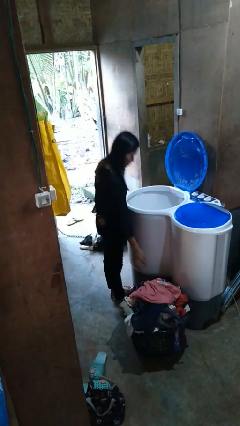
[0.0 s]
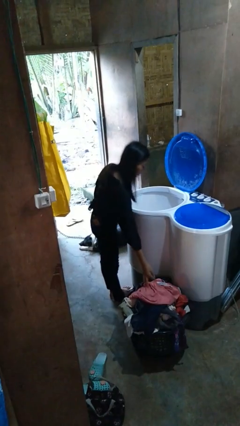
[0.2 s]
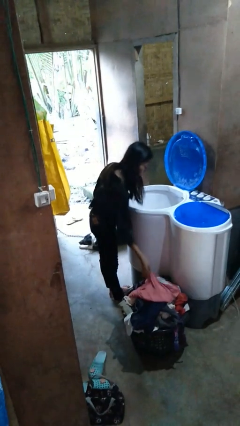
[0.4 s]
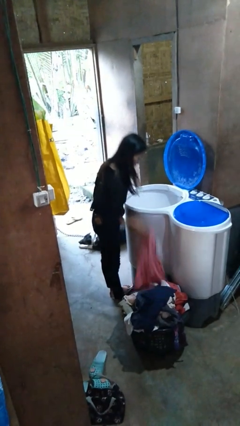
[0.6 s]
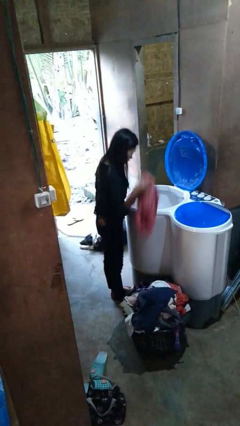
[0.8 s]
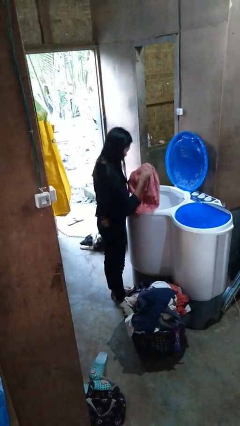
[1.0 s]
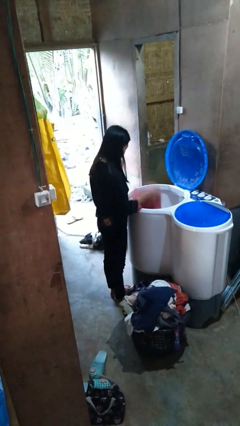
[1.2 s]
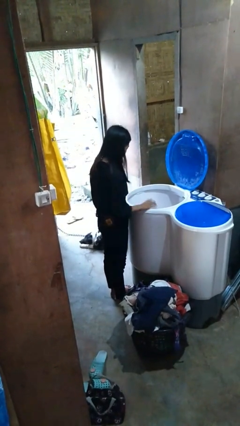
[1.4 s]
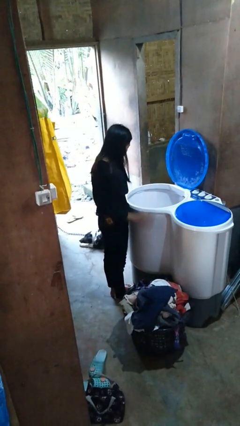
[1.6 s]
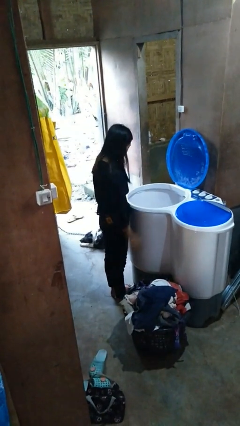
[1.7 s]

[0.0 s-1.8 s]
person loads clotheswasher

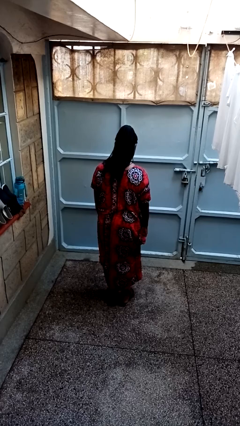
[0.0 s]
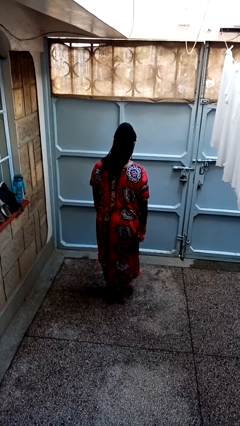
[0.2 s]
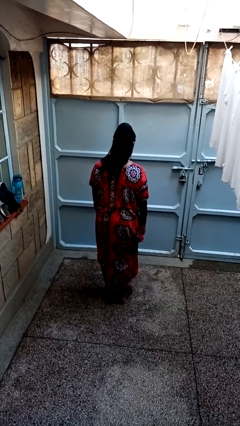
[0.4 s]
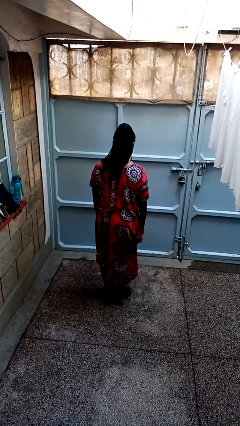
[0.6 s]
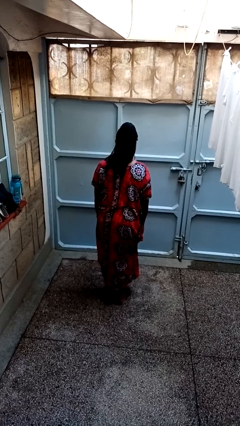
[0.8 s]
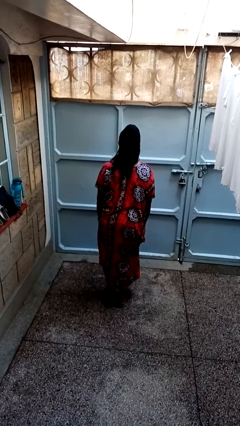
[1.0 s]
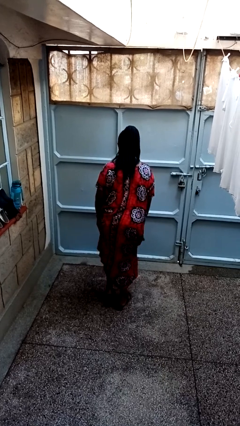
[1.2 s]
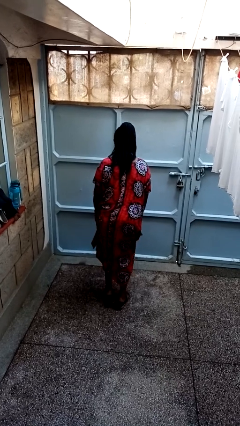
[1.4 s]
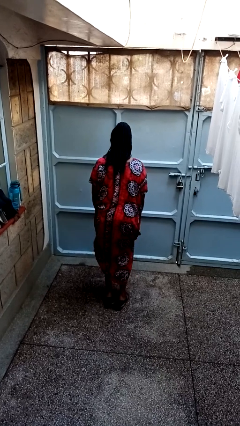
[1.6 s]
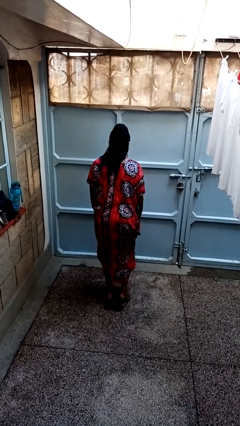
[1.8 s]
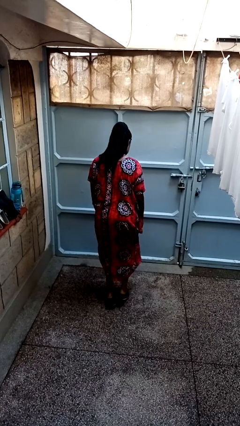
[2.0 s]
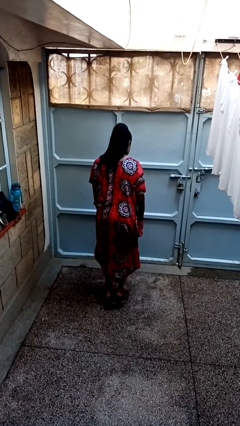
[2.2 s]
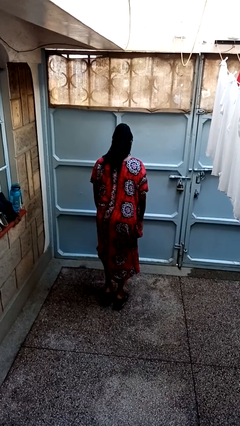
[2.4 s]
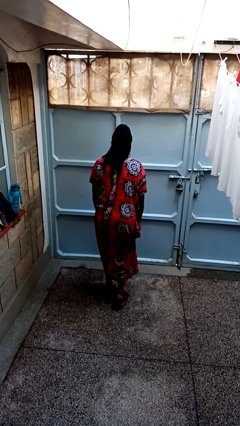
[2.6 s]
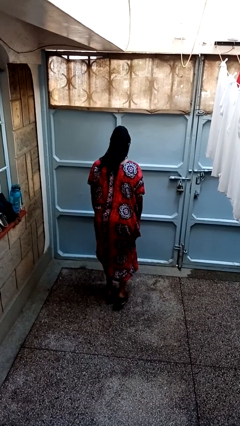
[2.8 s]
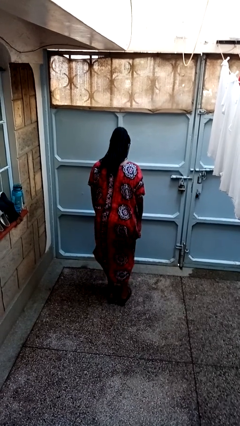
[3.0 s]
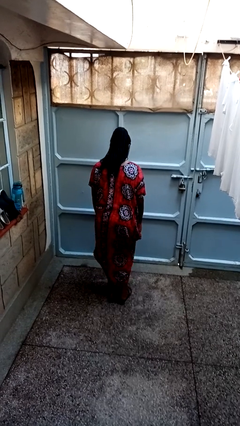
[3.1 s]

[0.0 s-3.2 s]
person walks tiptoe

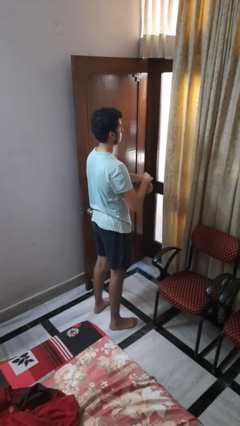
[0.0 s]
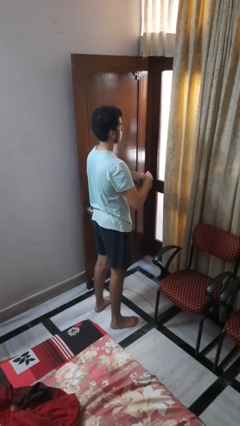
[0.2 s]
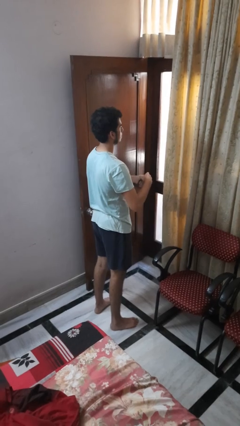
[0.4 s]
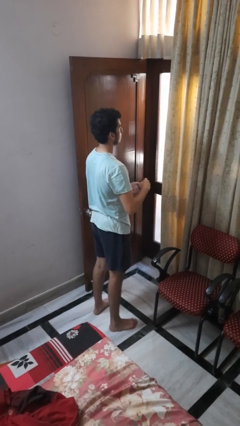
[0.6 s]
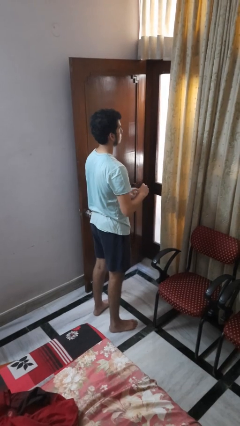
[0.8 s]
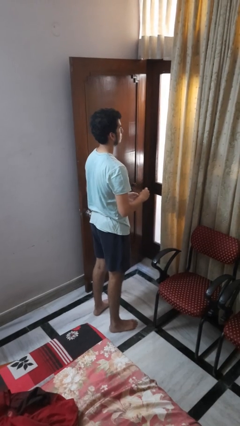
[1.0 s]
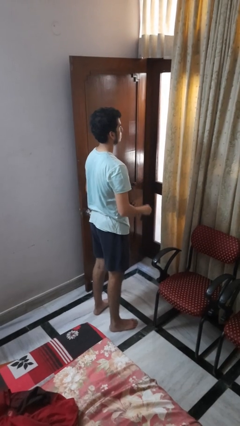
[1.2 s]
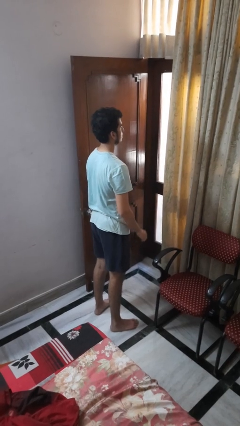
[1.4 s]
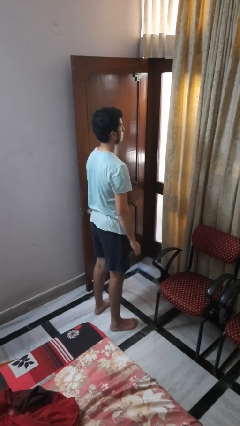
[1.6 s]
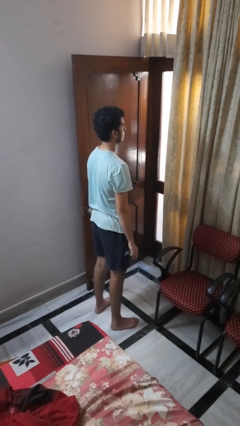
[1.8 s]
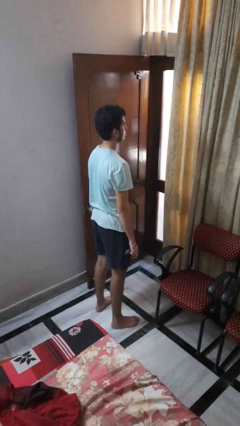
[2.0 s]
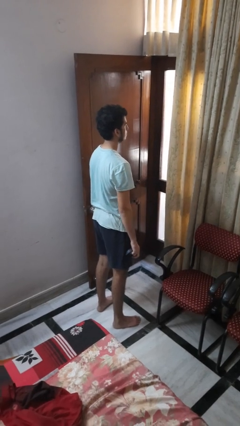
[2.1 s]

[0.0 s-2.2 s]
person takes off wristwatch

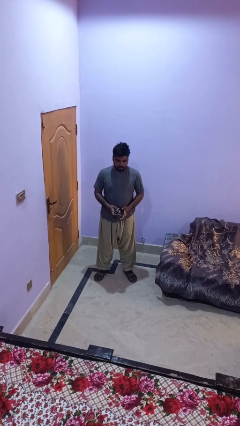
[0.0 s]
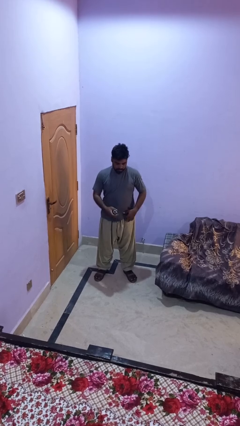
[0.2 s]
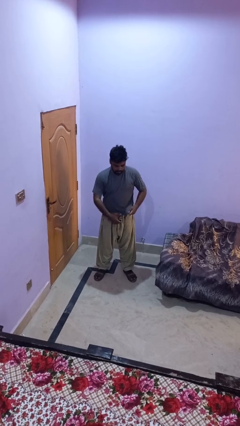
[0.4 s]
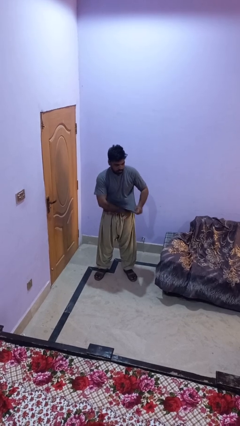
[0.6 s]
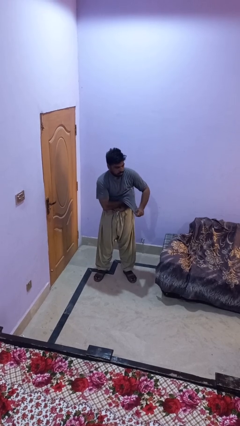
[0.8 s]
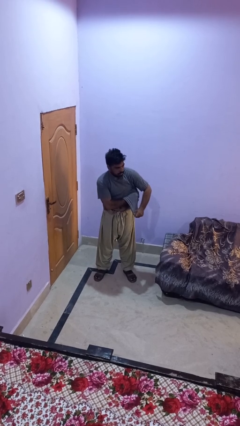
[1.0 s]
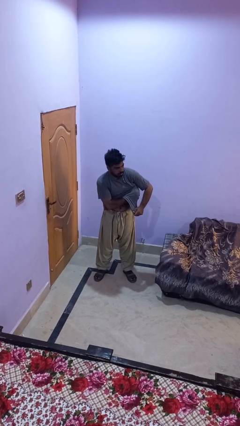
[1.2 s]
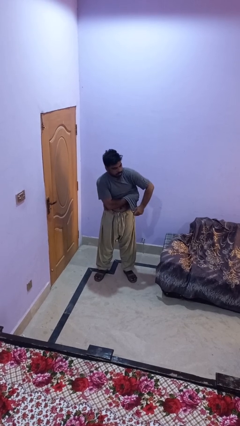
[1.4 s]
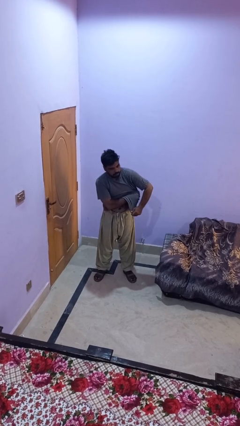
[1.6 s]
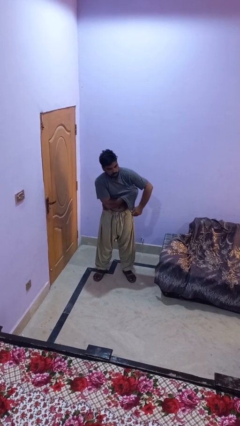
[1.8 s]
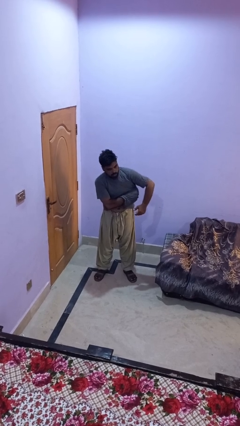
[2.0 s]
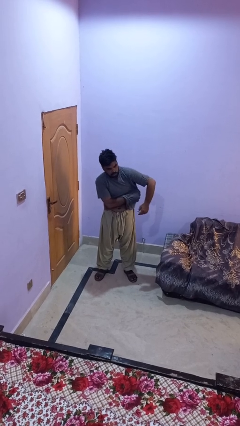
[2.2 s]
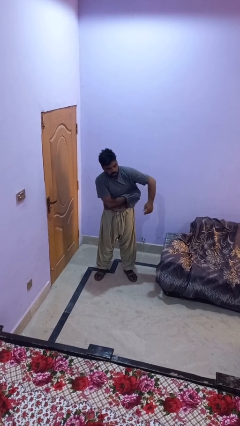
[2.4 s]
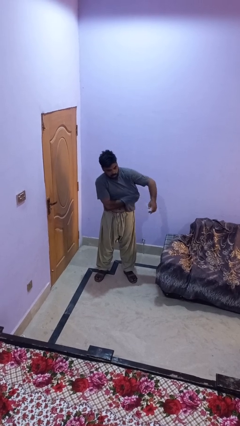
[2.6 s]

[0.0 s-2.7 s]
person applies deodorant

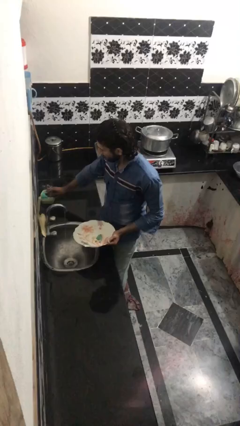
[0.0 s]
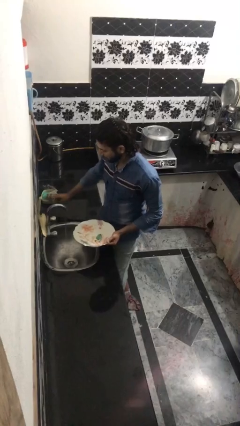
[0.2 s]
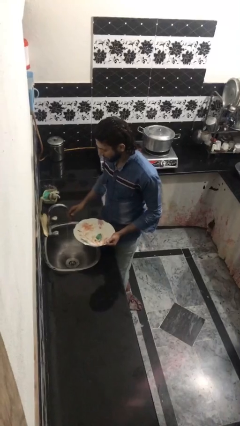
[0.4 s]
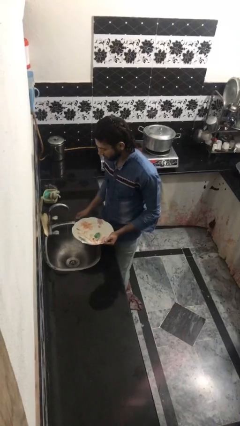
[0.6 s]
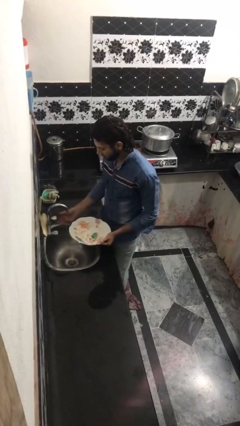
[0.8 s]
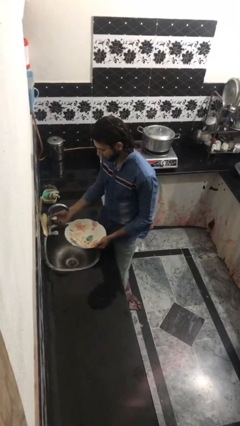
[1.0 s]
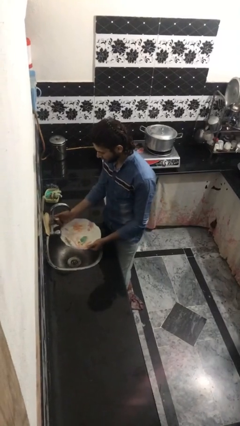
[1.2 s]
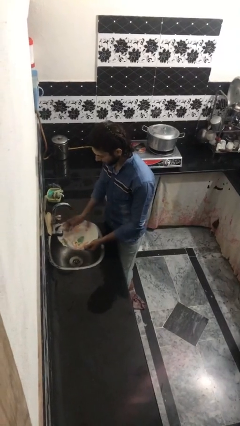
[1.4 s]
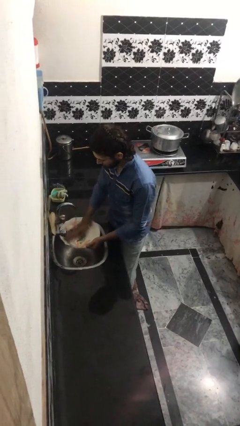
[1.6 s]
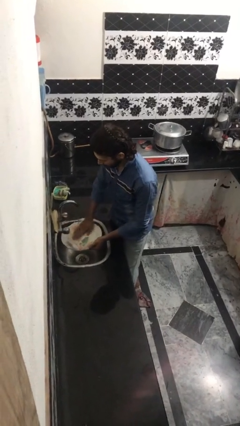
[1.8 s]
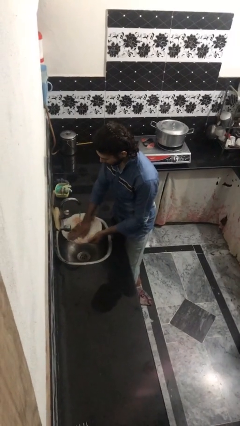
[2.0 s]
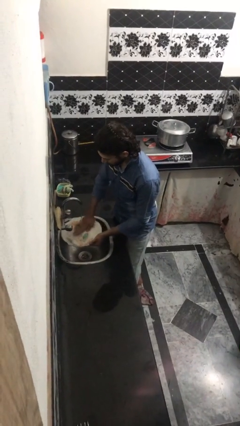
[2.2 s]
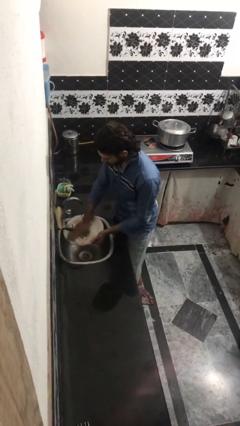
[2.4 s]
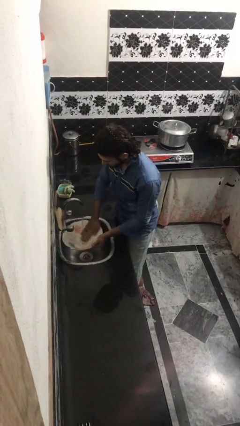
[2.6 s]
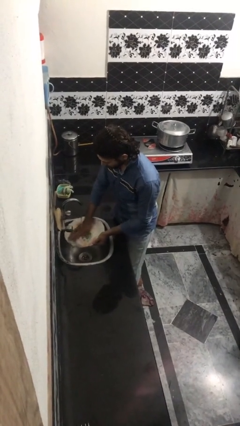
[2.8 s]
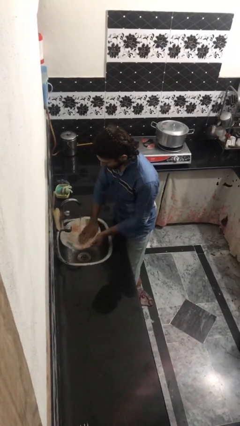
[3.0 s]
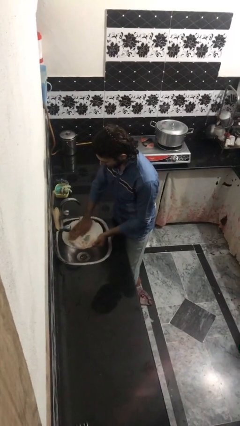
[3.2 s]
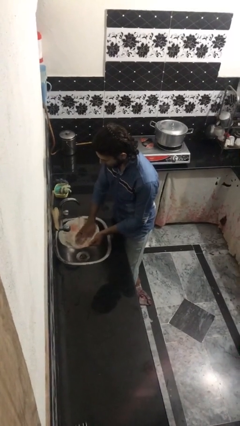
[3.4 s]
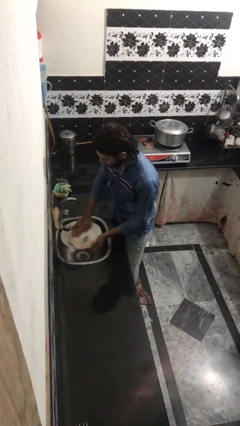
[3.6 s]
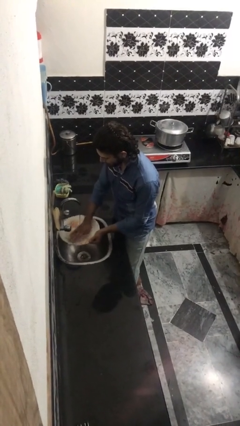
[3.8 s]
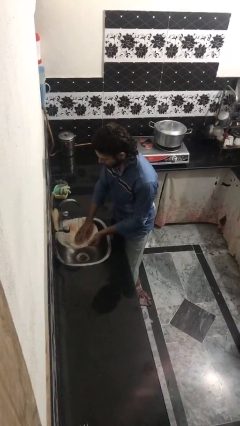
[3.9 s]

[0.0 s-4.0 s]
person washes dish

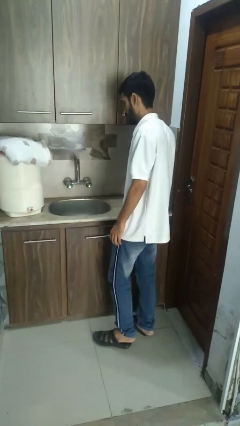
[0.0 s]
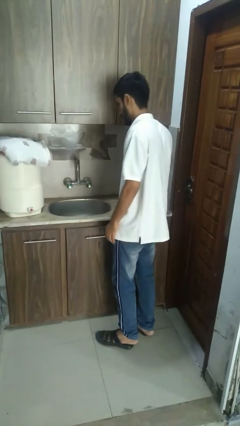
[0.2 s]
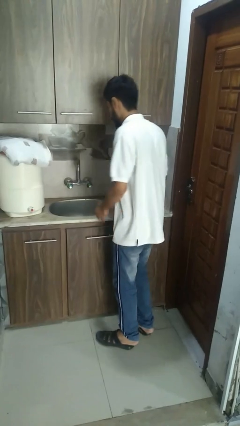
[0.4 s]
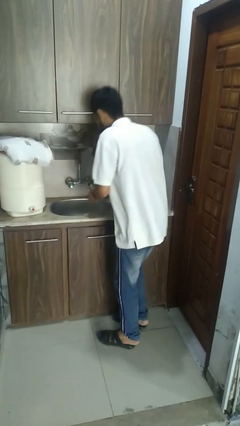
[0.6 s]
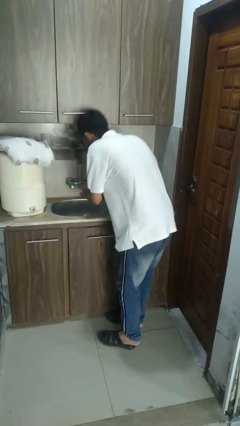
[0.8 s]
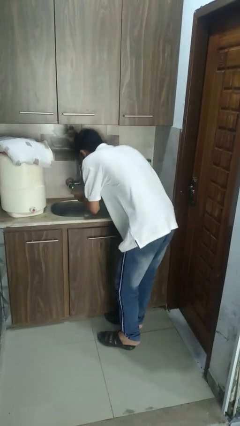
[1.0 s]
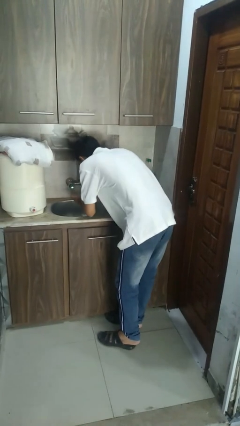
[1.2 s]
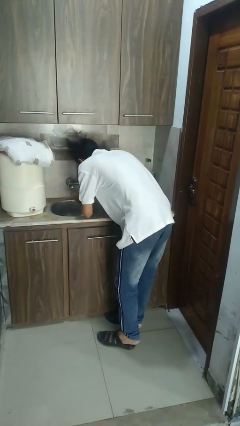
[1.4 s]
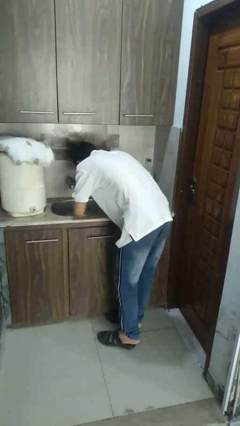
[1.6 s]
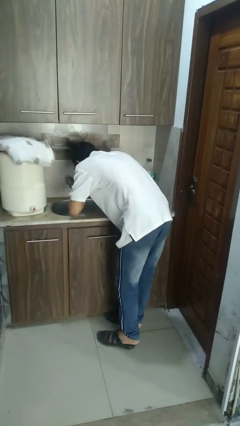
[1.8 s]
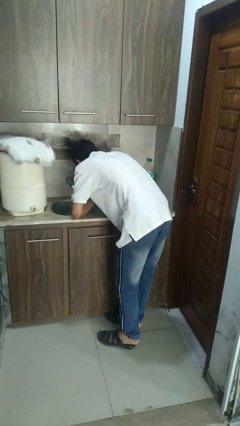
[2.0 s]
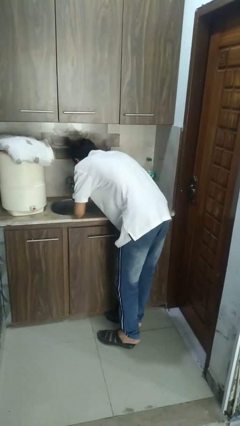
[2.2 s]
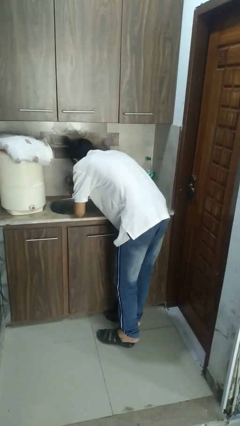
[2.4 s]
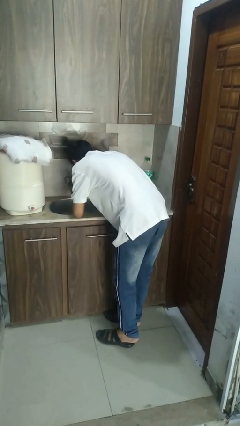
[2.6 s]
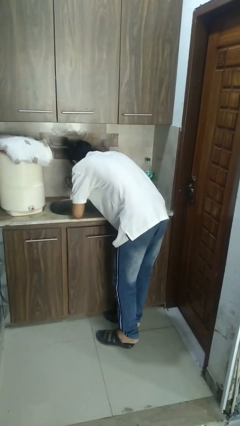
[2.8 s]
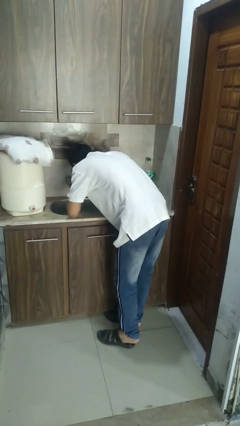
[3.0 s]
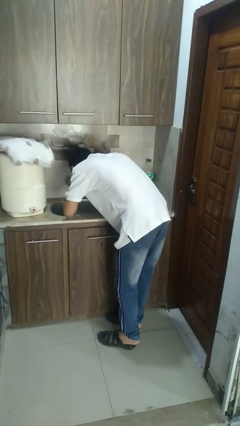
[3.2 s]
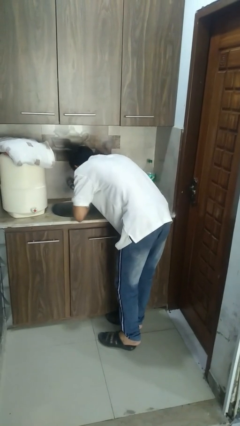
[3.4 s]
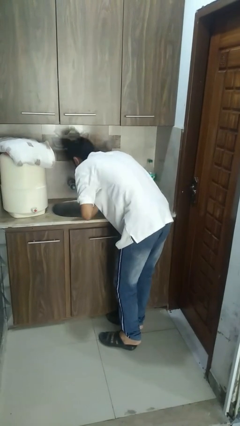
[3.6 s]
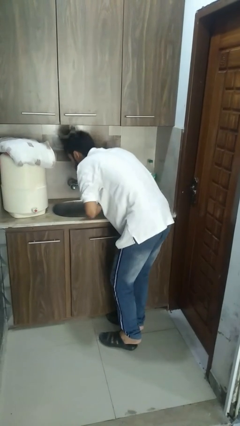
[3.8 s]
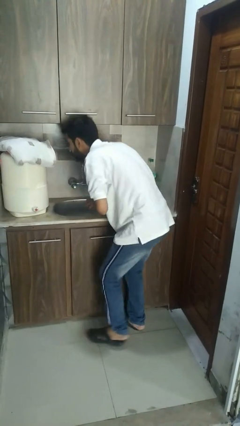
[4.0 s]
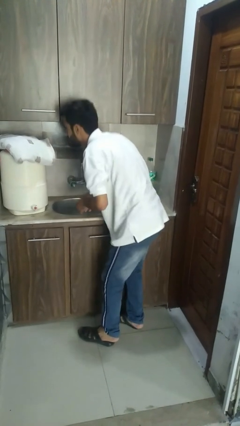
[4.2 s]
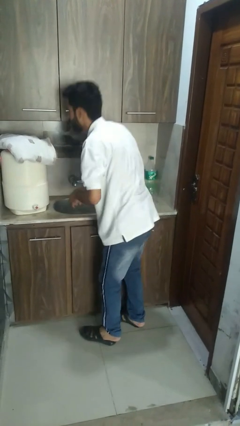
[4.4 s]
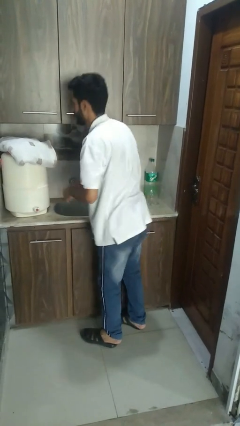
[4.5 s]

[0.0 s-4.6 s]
person washes face
